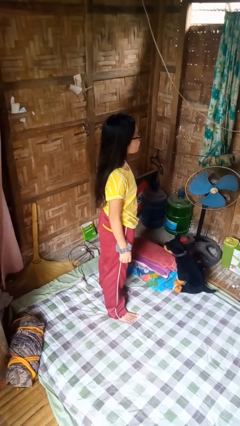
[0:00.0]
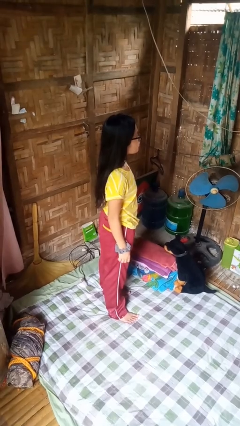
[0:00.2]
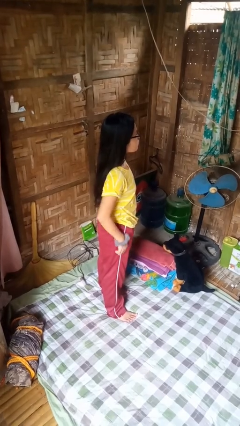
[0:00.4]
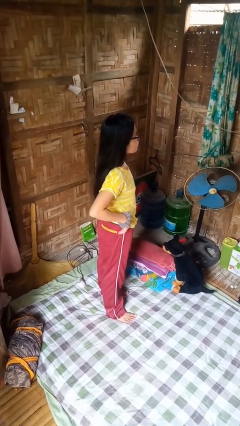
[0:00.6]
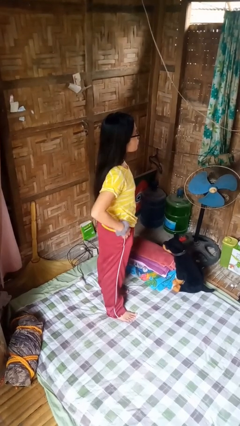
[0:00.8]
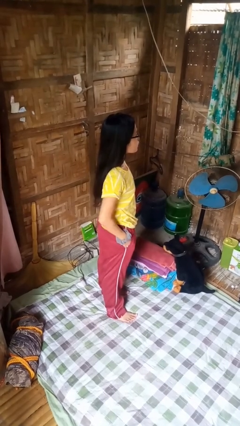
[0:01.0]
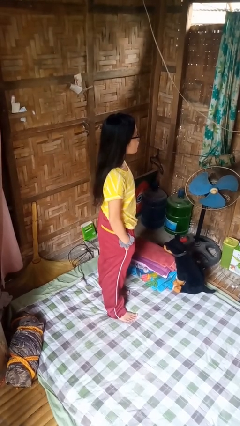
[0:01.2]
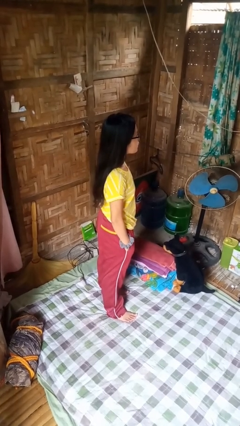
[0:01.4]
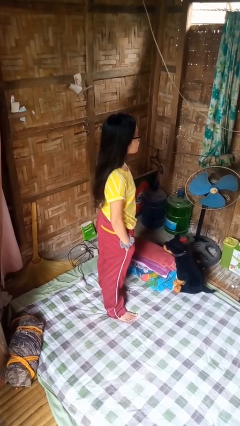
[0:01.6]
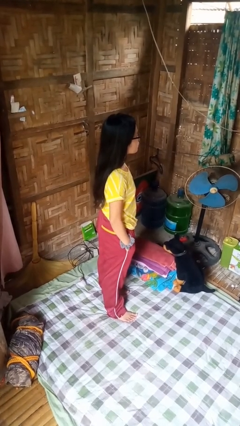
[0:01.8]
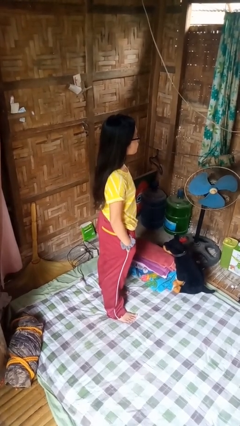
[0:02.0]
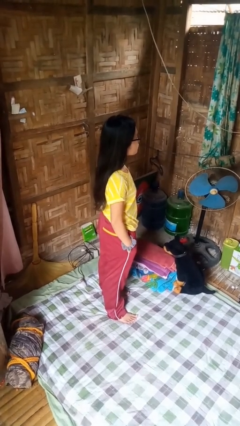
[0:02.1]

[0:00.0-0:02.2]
person puts hands in back pockets

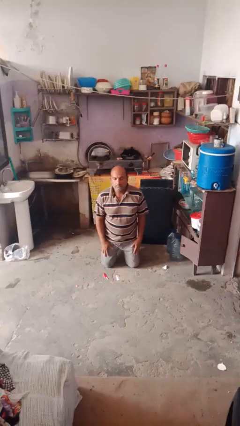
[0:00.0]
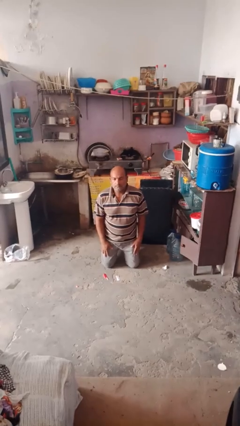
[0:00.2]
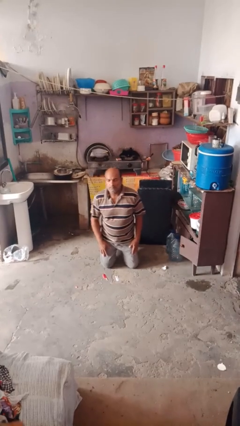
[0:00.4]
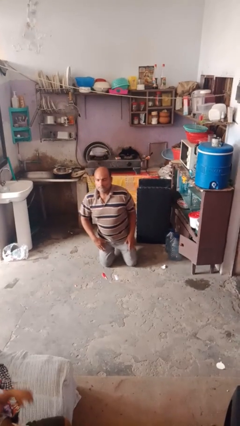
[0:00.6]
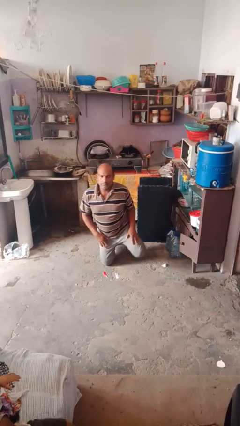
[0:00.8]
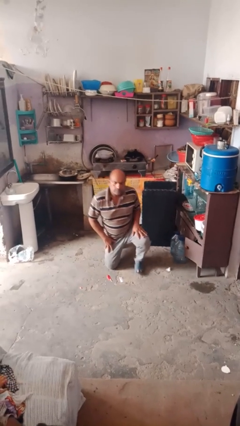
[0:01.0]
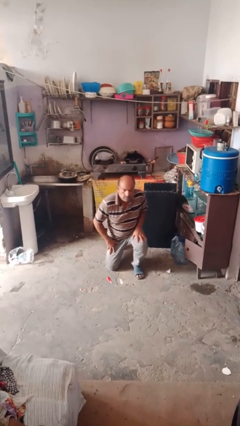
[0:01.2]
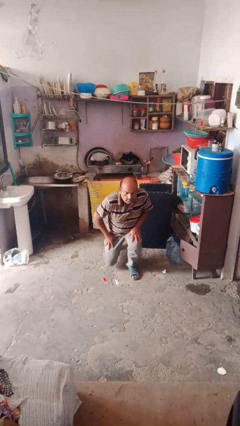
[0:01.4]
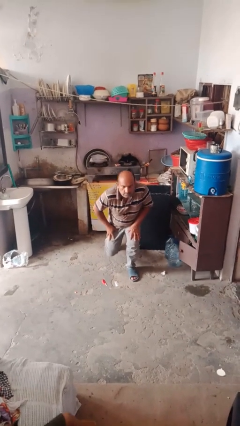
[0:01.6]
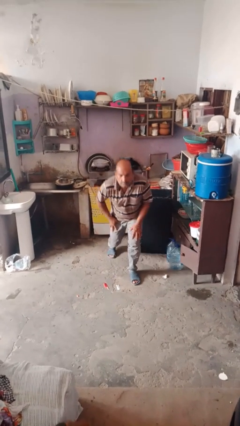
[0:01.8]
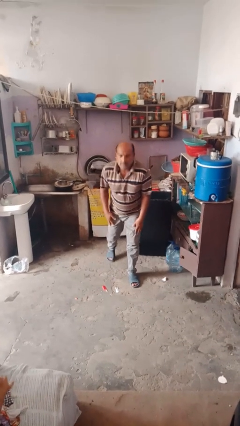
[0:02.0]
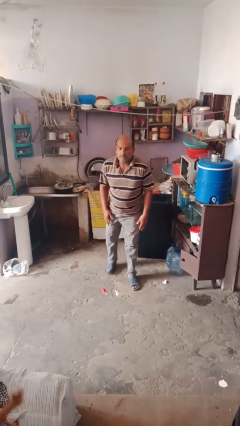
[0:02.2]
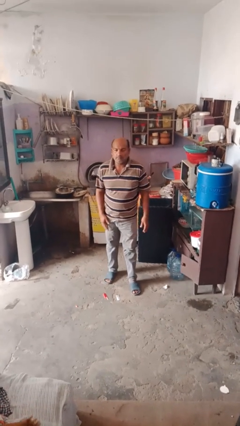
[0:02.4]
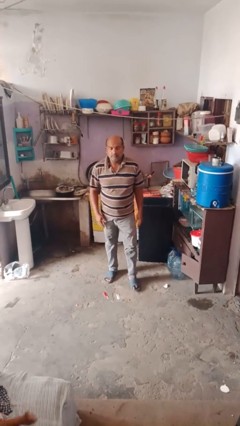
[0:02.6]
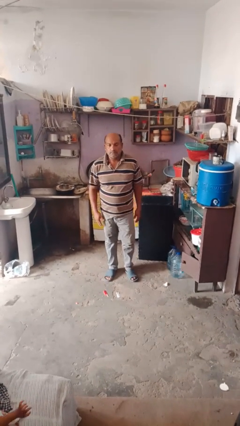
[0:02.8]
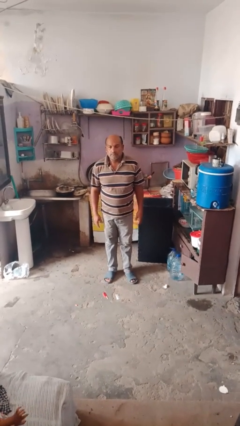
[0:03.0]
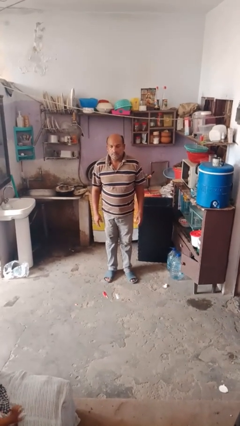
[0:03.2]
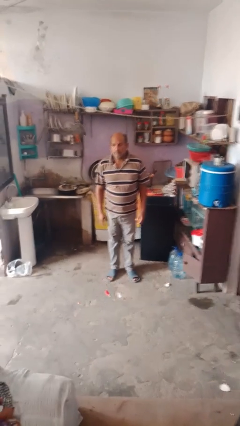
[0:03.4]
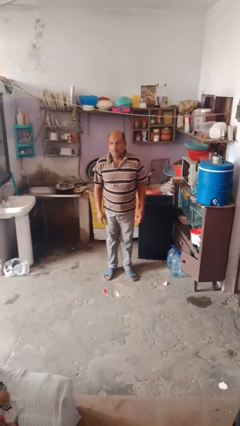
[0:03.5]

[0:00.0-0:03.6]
person stands up from floor

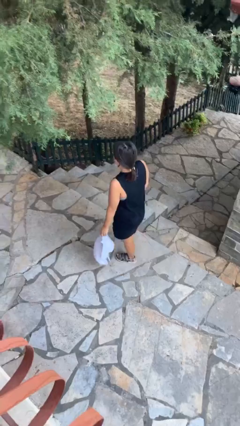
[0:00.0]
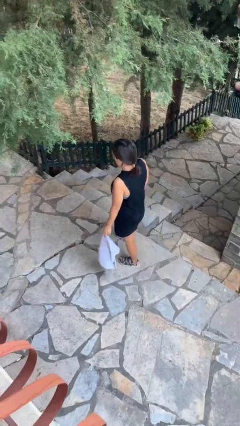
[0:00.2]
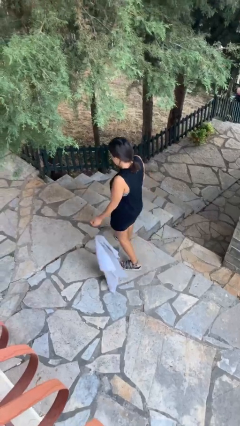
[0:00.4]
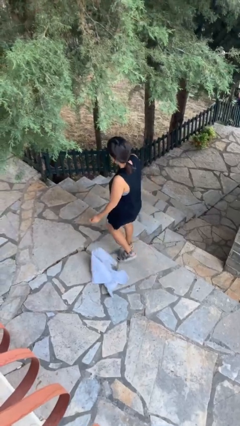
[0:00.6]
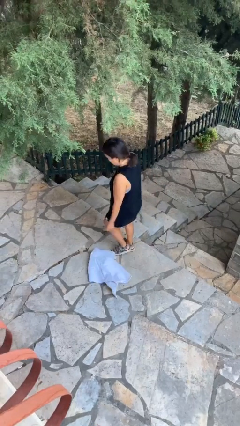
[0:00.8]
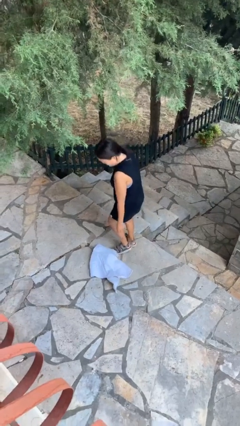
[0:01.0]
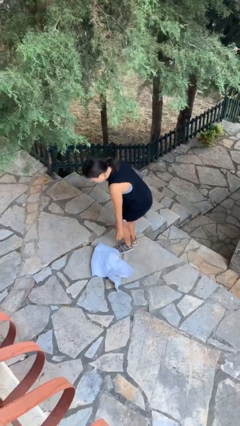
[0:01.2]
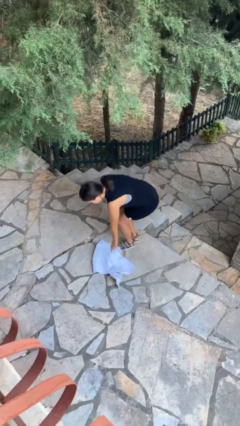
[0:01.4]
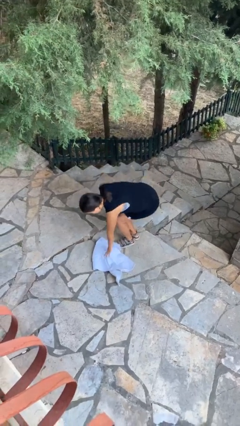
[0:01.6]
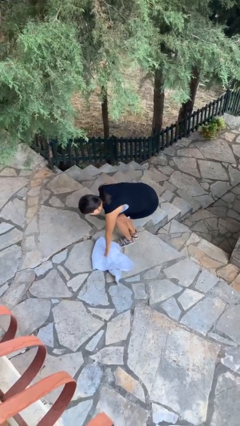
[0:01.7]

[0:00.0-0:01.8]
person drops object

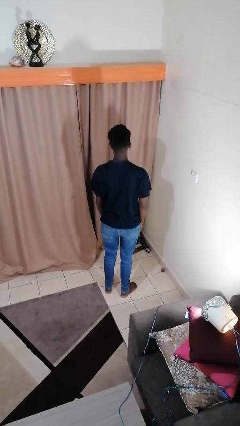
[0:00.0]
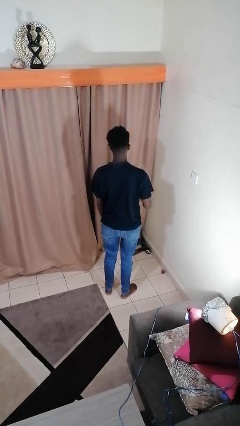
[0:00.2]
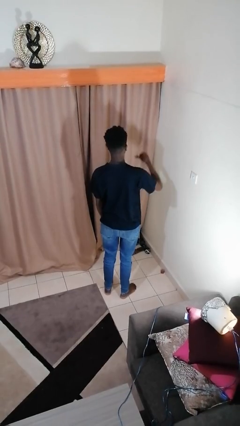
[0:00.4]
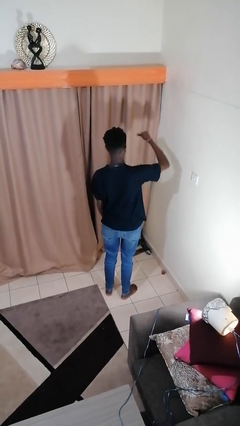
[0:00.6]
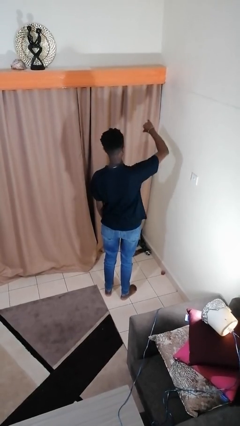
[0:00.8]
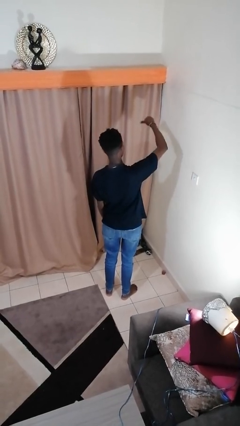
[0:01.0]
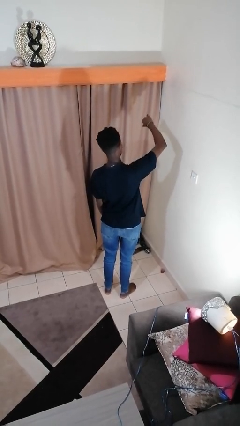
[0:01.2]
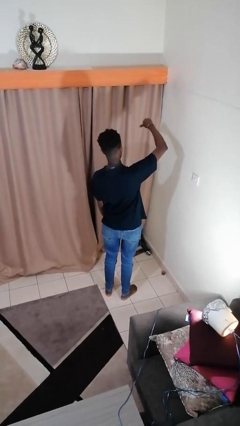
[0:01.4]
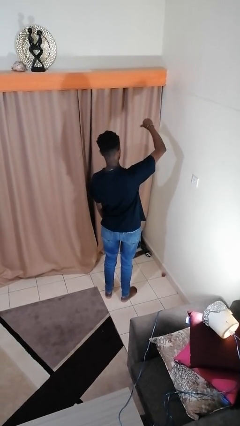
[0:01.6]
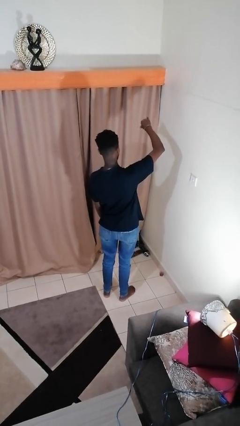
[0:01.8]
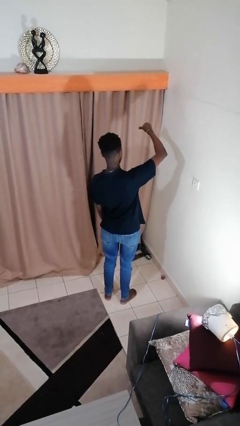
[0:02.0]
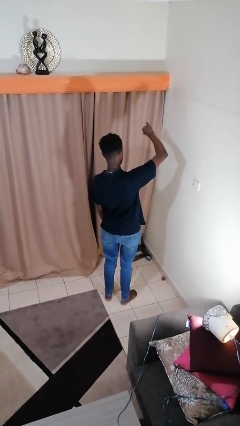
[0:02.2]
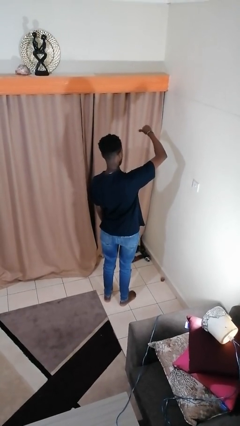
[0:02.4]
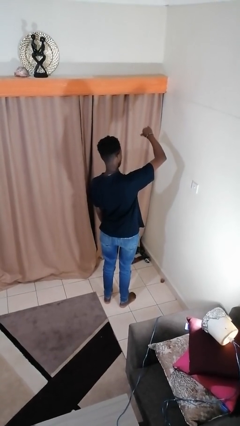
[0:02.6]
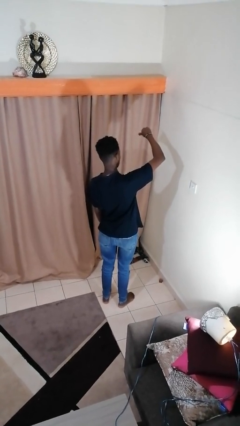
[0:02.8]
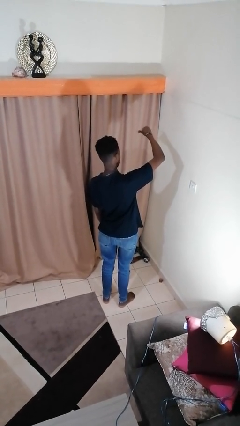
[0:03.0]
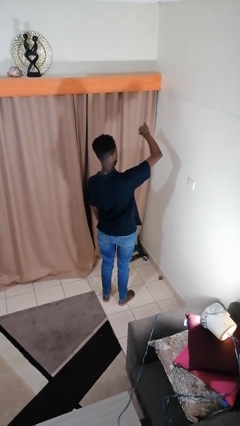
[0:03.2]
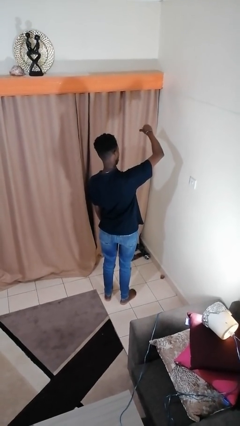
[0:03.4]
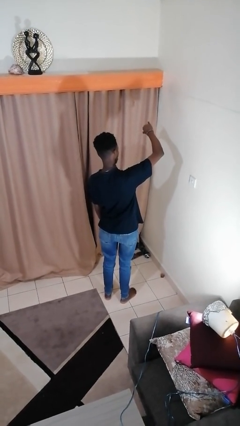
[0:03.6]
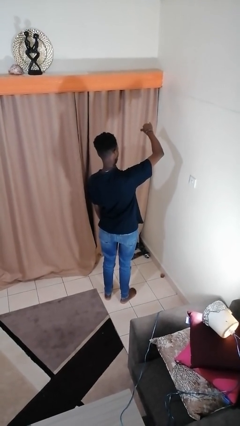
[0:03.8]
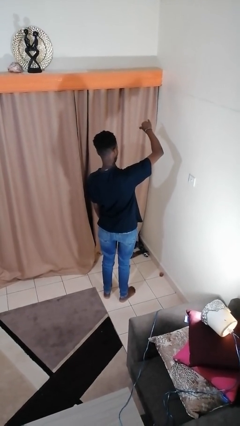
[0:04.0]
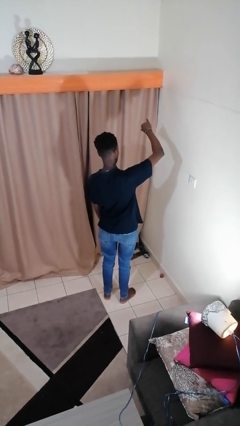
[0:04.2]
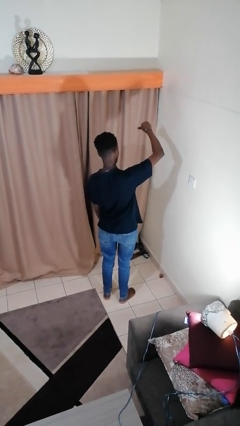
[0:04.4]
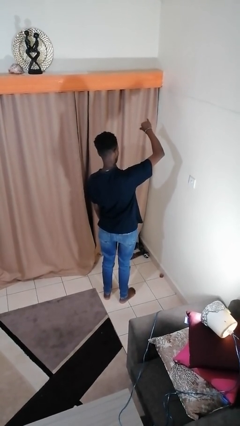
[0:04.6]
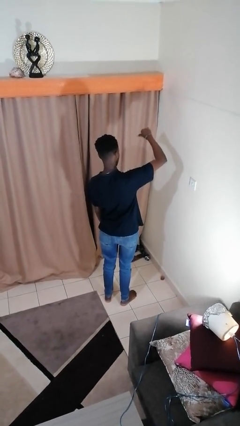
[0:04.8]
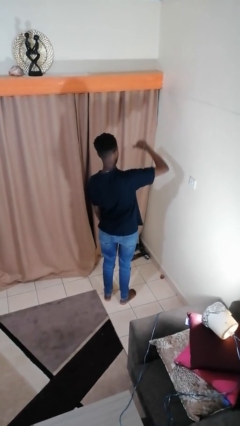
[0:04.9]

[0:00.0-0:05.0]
person gestures hang loose

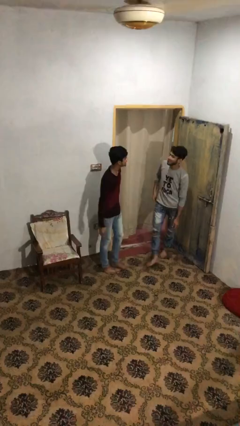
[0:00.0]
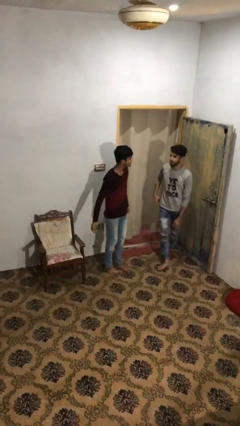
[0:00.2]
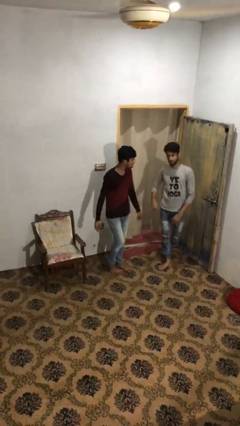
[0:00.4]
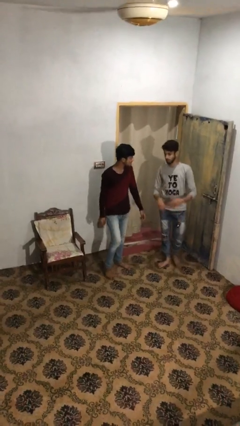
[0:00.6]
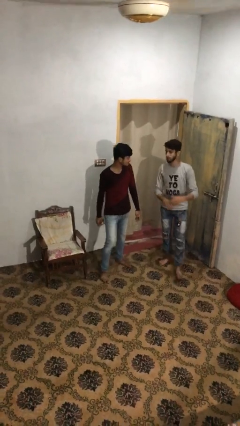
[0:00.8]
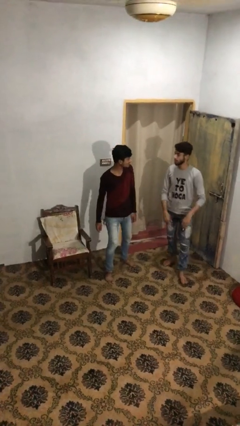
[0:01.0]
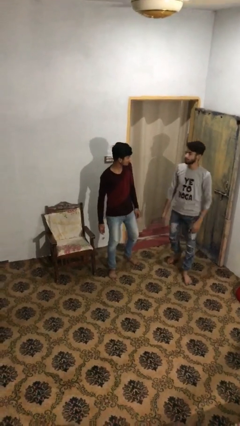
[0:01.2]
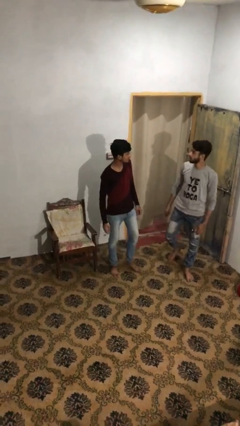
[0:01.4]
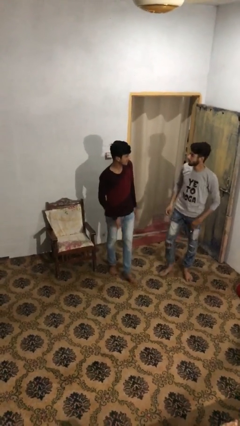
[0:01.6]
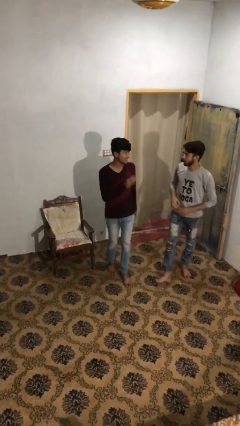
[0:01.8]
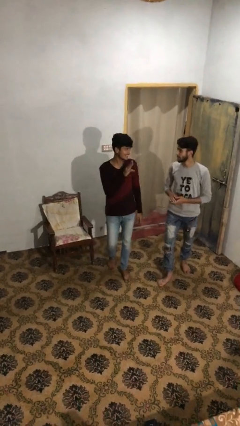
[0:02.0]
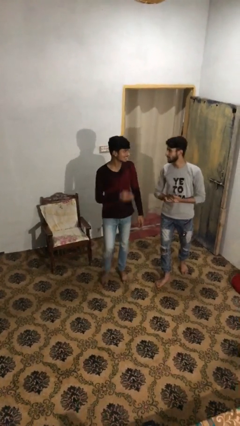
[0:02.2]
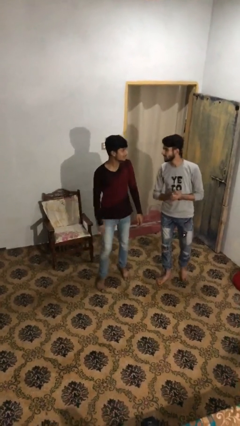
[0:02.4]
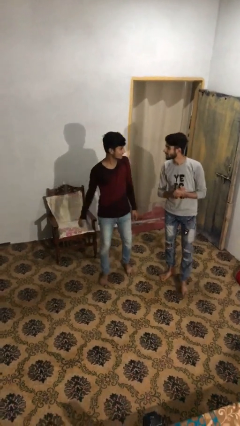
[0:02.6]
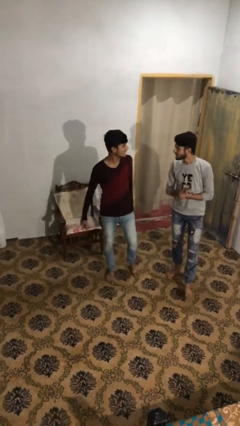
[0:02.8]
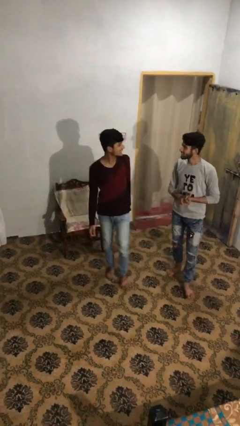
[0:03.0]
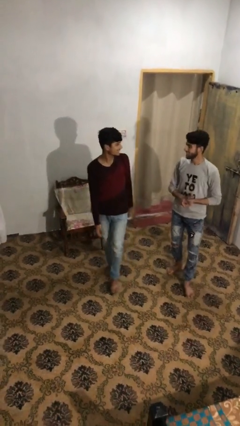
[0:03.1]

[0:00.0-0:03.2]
person talks to person

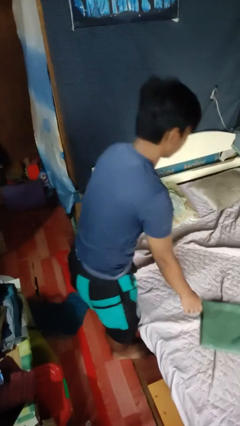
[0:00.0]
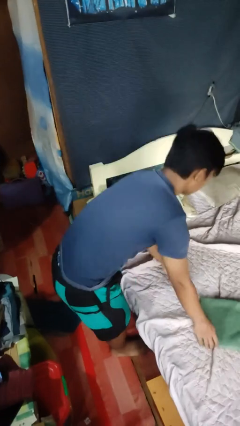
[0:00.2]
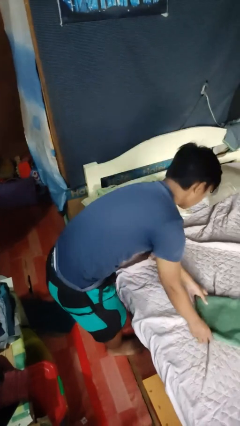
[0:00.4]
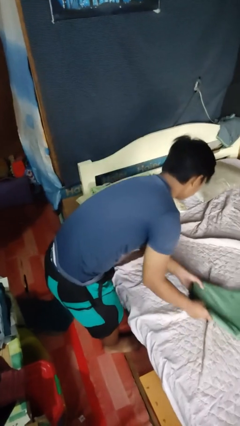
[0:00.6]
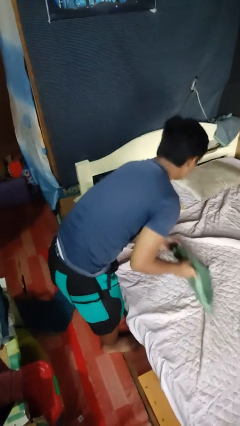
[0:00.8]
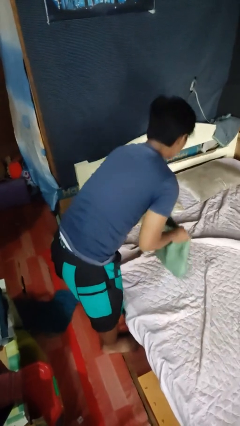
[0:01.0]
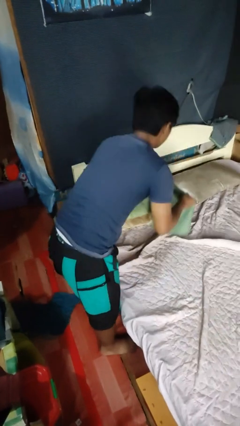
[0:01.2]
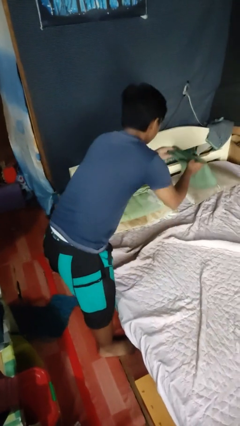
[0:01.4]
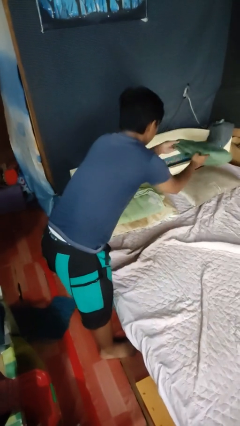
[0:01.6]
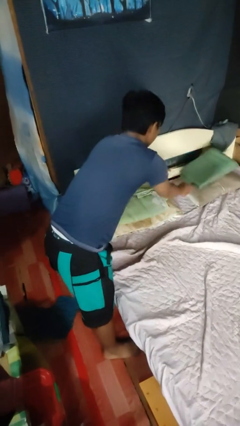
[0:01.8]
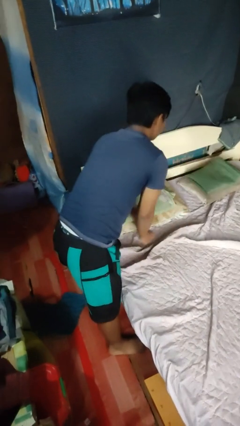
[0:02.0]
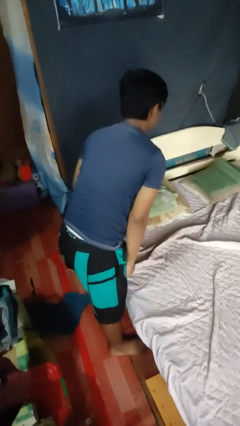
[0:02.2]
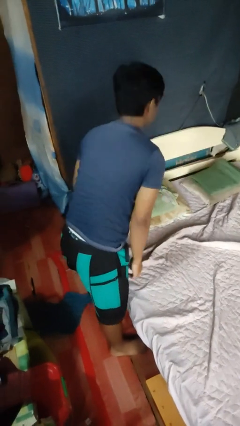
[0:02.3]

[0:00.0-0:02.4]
person makes bed
